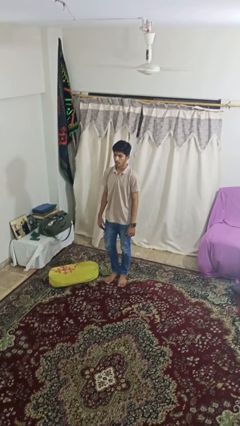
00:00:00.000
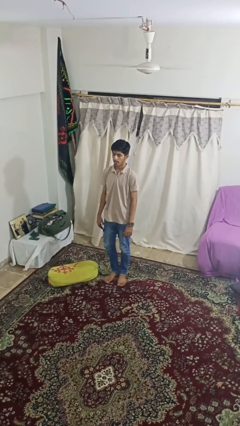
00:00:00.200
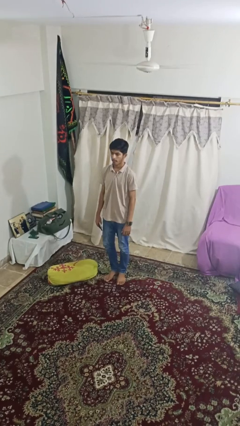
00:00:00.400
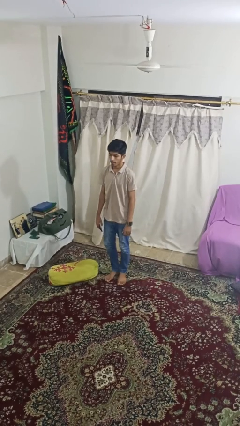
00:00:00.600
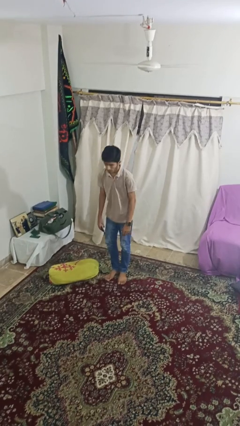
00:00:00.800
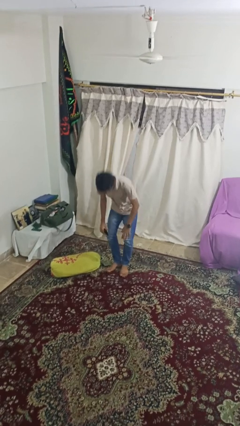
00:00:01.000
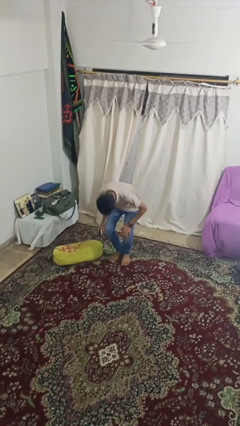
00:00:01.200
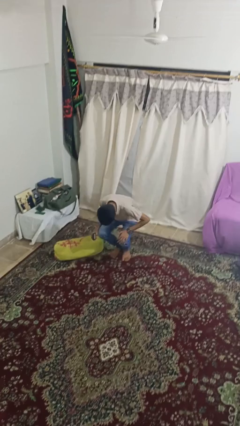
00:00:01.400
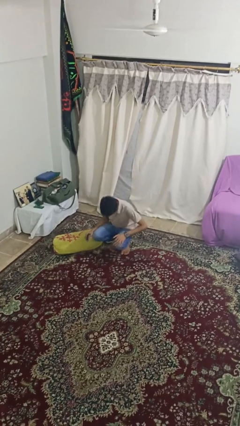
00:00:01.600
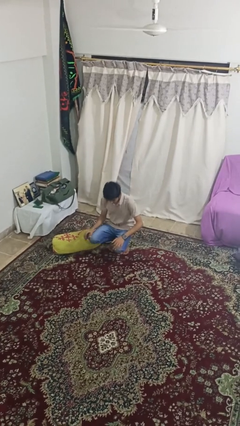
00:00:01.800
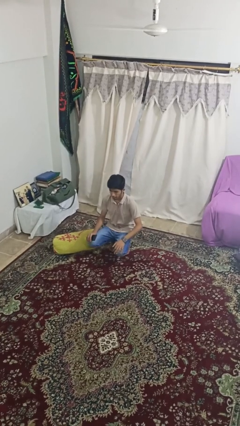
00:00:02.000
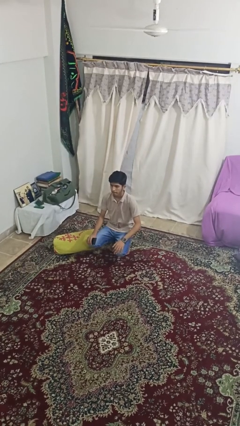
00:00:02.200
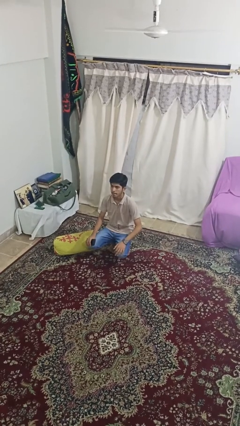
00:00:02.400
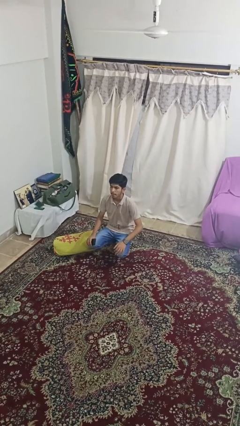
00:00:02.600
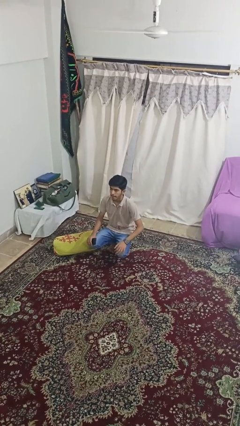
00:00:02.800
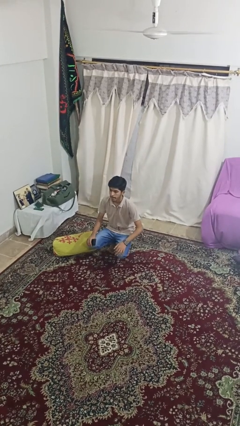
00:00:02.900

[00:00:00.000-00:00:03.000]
person squats

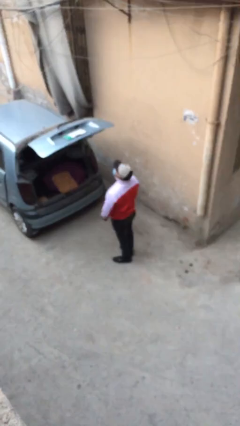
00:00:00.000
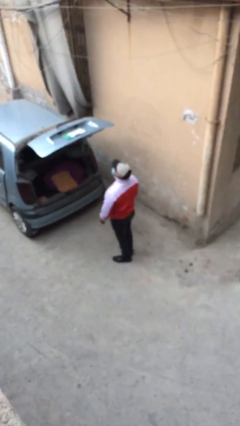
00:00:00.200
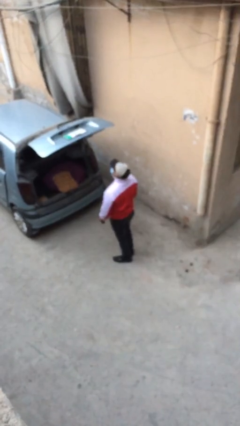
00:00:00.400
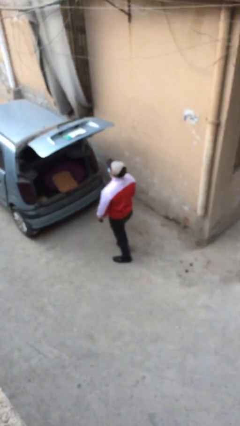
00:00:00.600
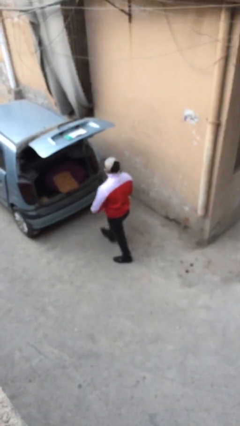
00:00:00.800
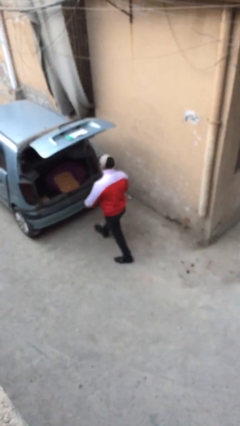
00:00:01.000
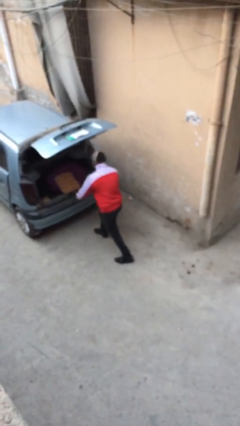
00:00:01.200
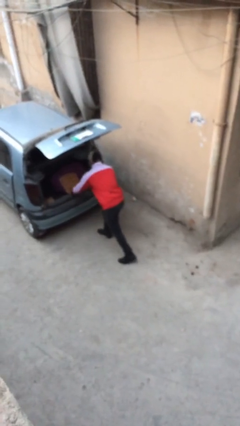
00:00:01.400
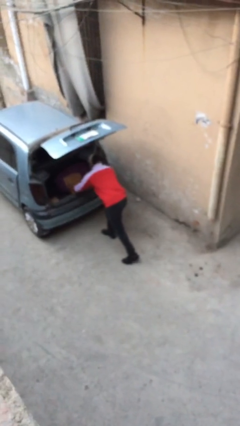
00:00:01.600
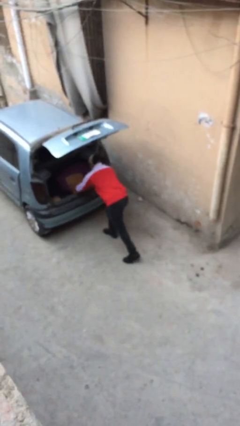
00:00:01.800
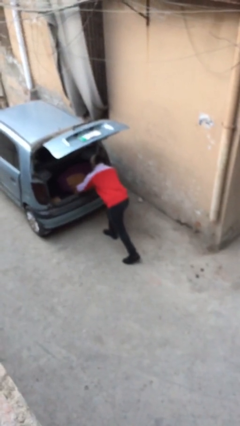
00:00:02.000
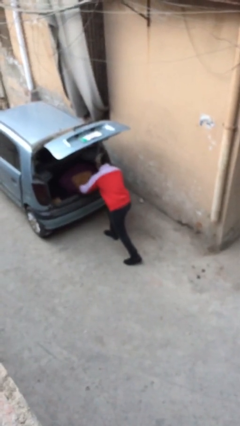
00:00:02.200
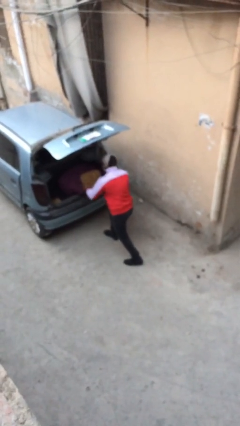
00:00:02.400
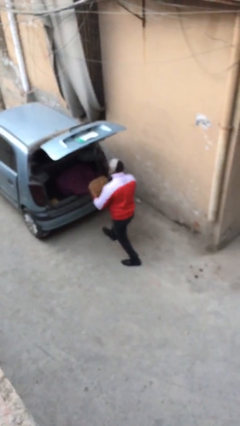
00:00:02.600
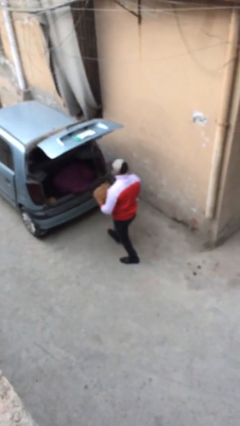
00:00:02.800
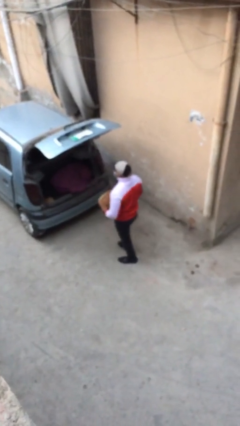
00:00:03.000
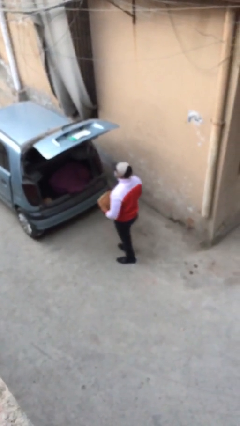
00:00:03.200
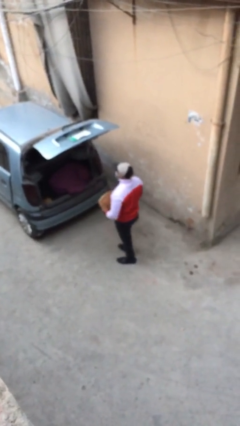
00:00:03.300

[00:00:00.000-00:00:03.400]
person unloads car

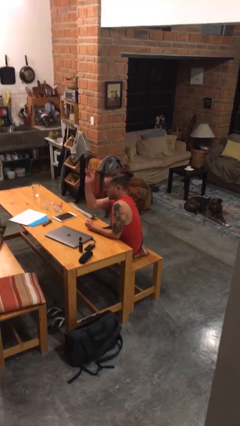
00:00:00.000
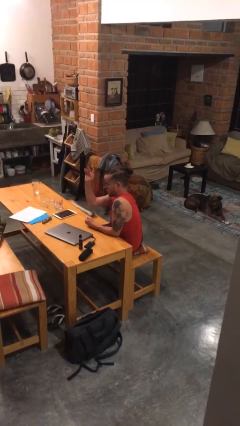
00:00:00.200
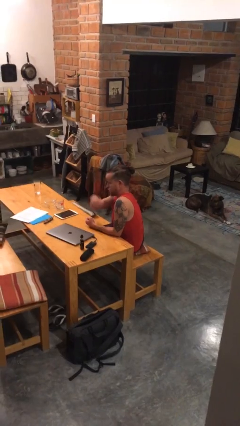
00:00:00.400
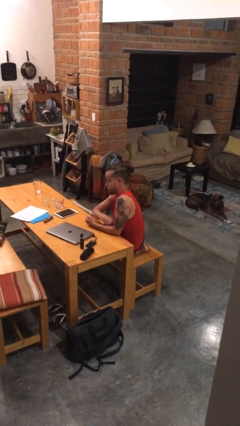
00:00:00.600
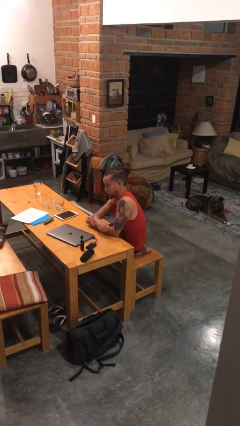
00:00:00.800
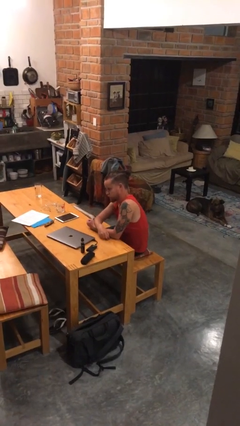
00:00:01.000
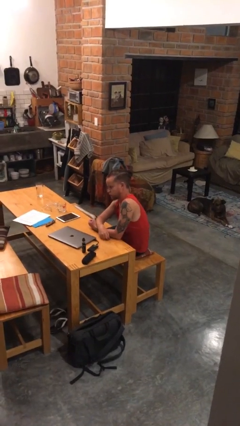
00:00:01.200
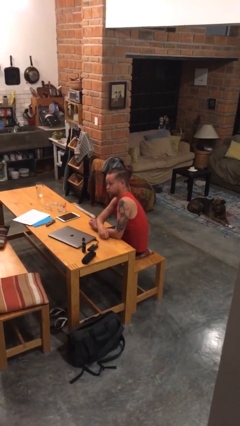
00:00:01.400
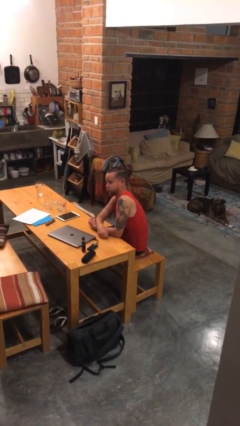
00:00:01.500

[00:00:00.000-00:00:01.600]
person gestures lower hand

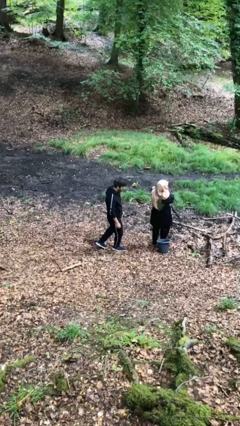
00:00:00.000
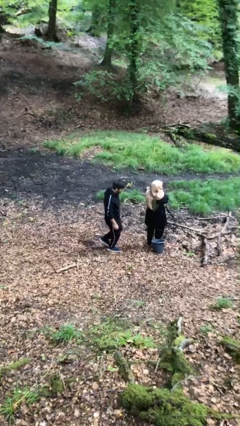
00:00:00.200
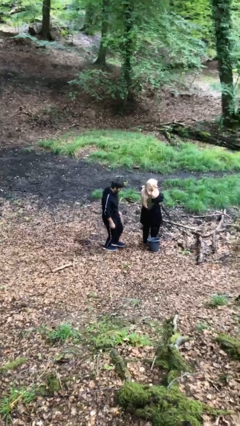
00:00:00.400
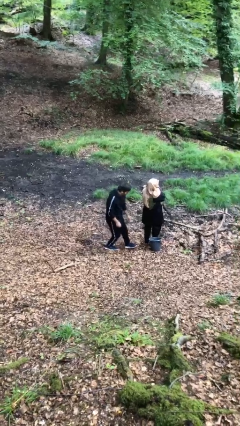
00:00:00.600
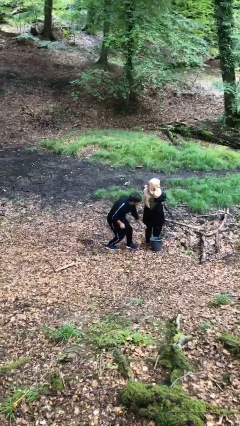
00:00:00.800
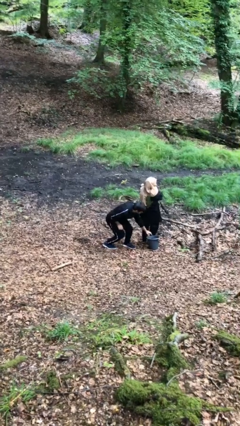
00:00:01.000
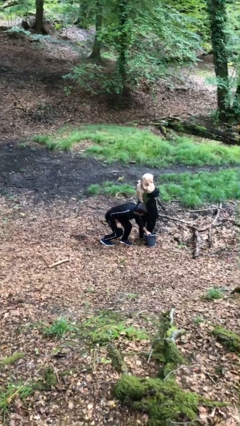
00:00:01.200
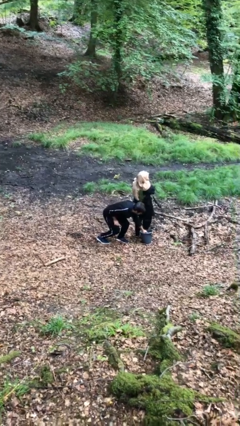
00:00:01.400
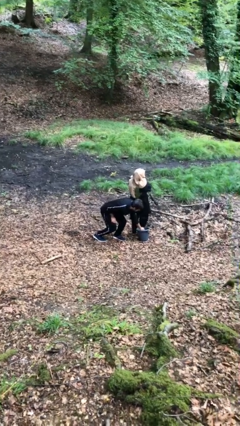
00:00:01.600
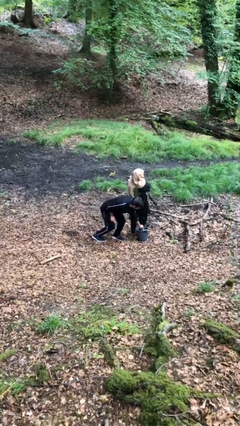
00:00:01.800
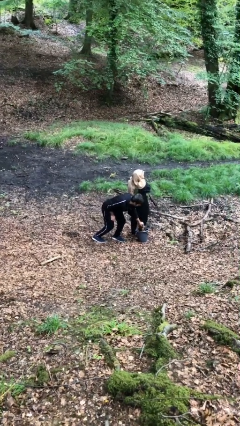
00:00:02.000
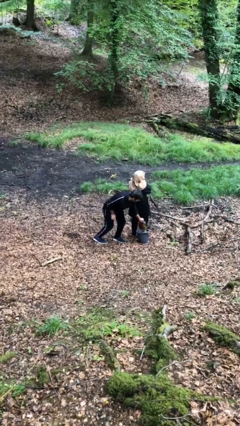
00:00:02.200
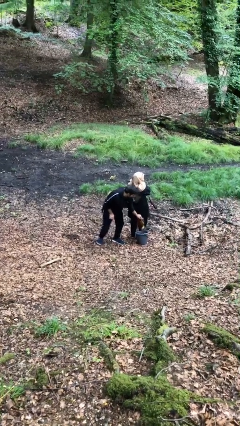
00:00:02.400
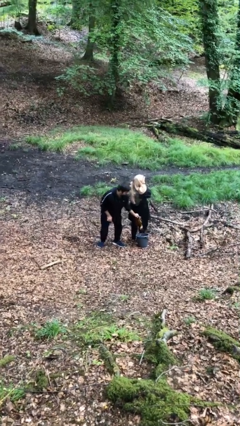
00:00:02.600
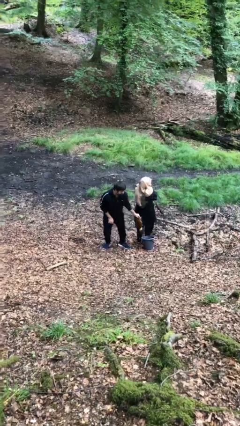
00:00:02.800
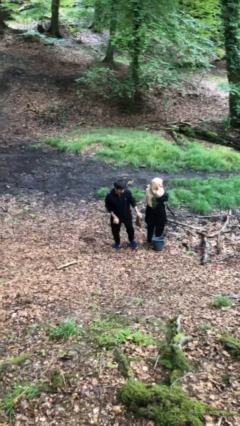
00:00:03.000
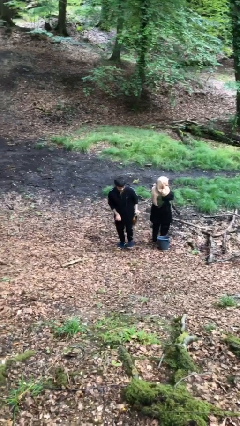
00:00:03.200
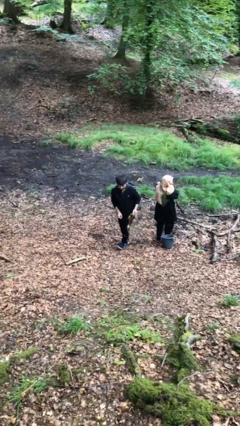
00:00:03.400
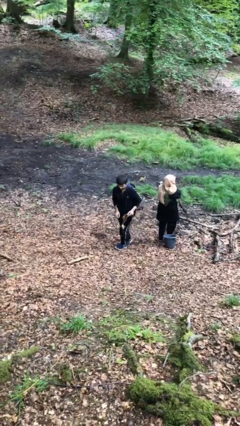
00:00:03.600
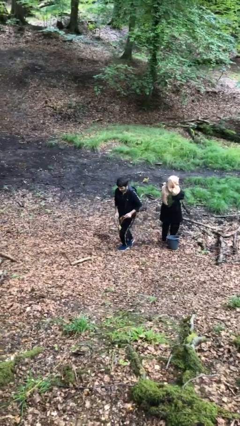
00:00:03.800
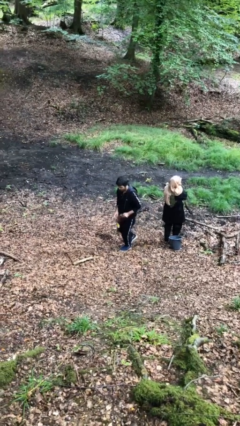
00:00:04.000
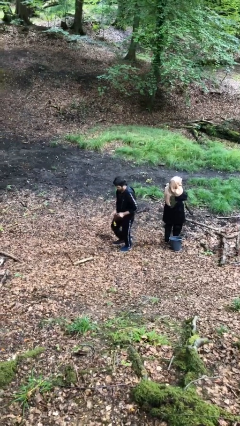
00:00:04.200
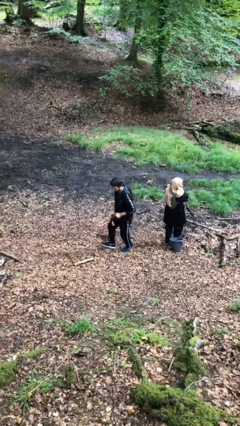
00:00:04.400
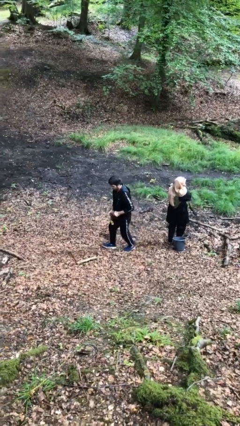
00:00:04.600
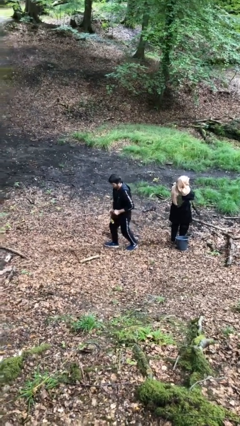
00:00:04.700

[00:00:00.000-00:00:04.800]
person steals object from person

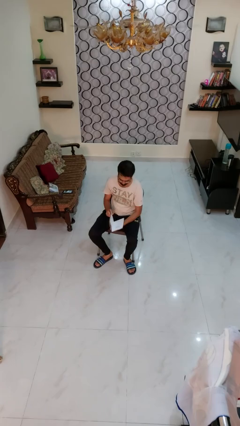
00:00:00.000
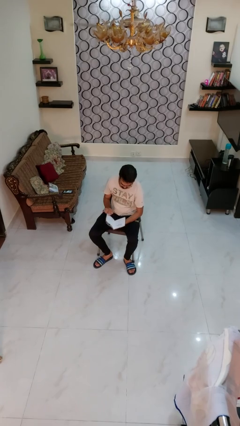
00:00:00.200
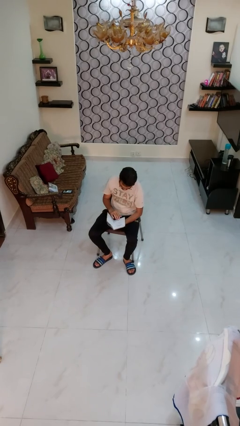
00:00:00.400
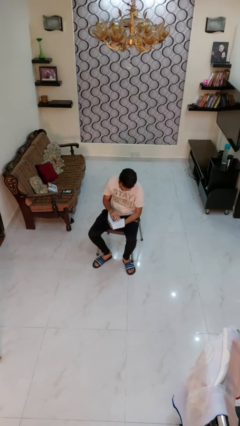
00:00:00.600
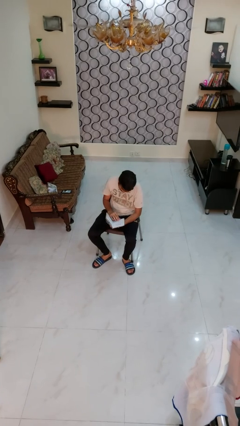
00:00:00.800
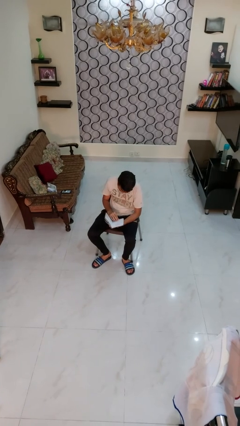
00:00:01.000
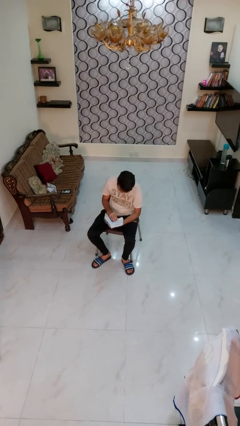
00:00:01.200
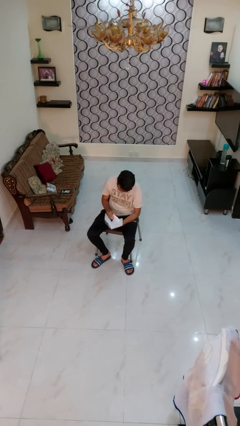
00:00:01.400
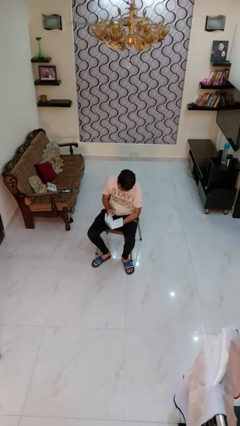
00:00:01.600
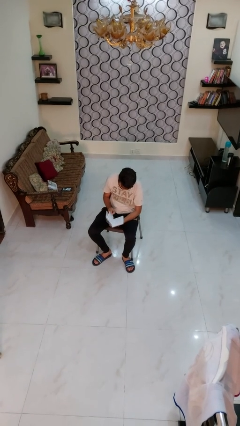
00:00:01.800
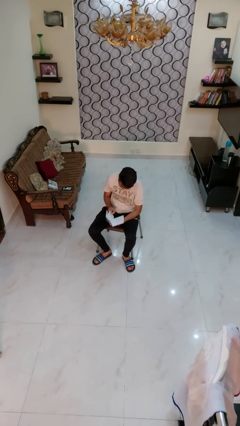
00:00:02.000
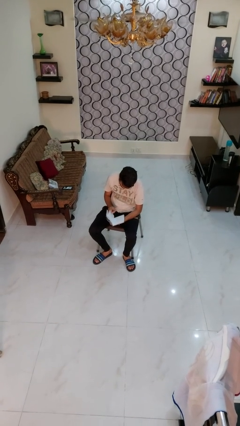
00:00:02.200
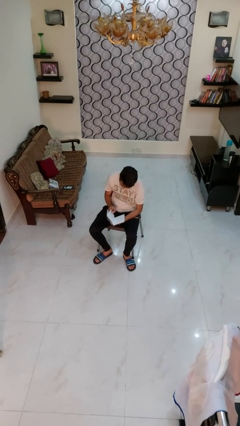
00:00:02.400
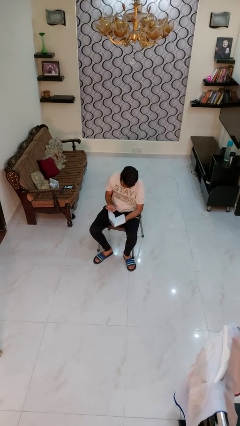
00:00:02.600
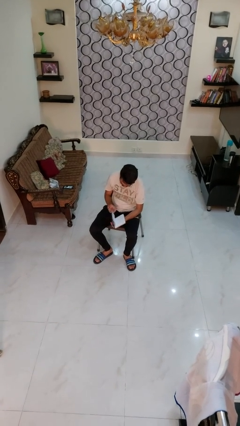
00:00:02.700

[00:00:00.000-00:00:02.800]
person reads book

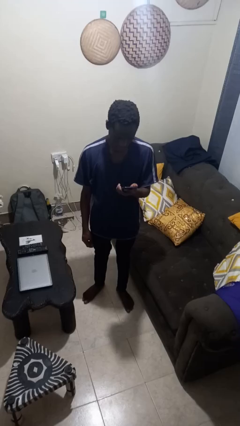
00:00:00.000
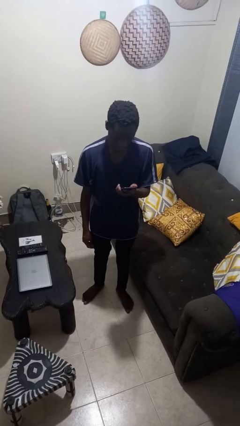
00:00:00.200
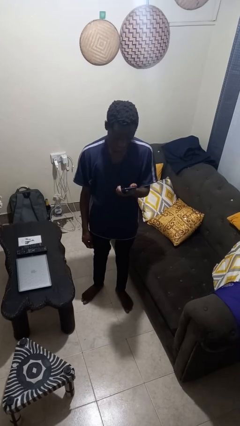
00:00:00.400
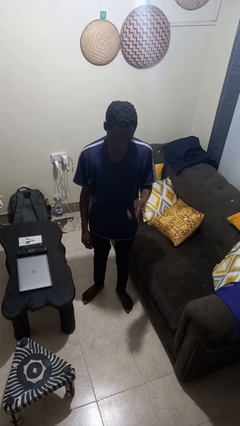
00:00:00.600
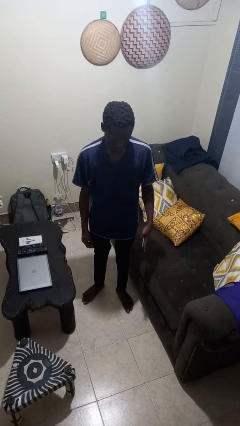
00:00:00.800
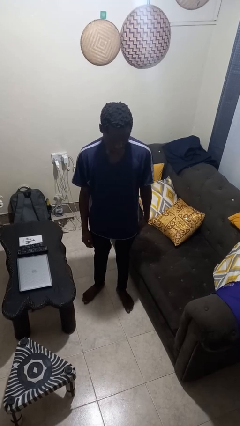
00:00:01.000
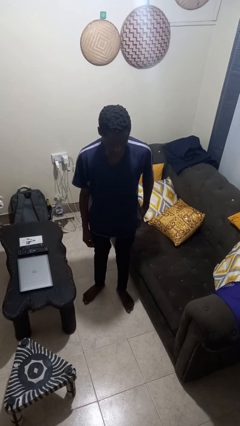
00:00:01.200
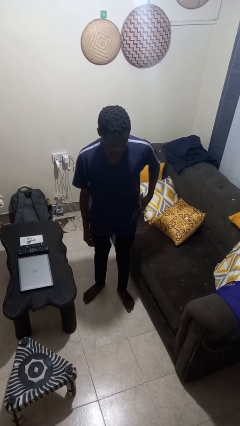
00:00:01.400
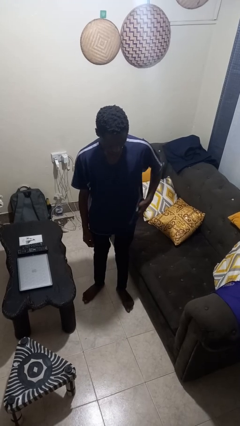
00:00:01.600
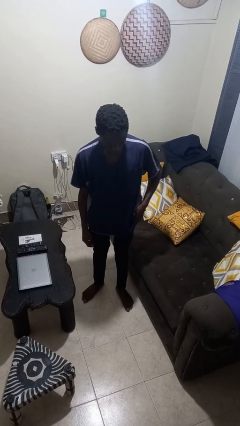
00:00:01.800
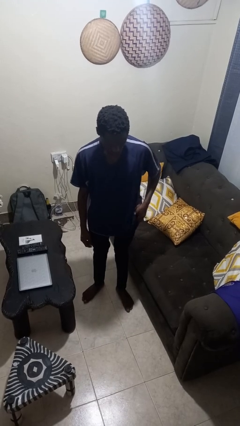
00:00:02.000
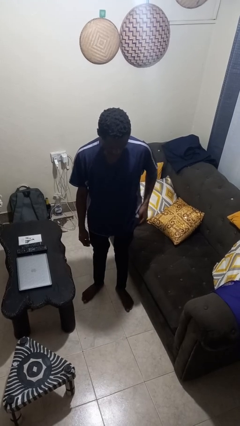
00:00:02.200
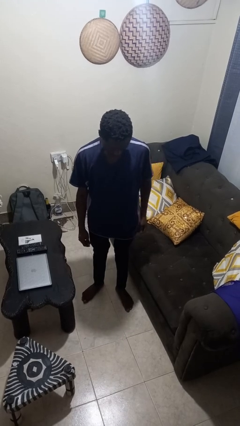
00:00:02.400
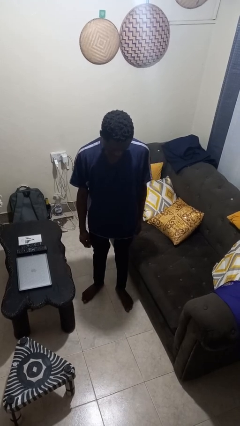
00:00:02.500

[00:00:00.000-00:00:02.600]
person puts phone into pocket
